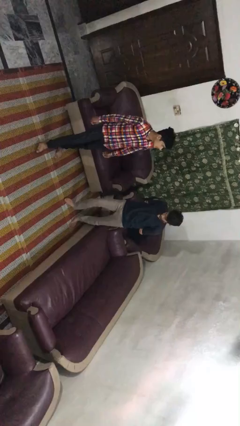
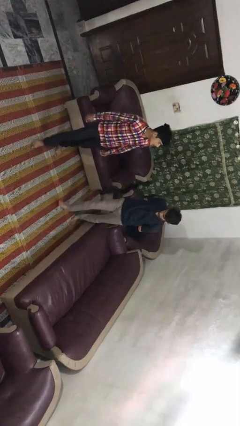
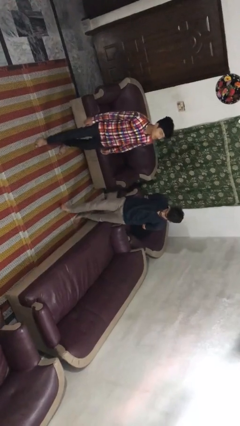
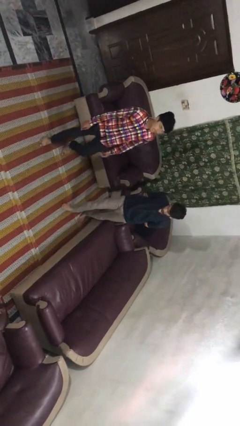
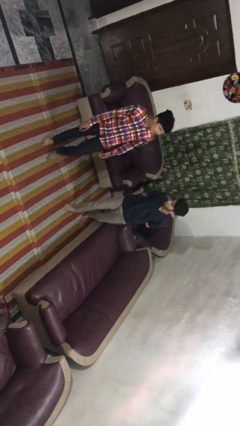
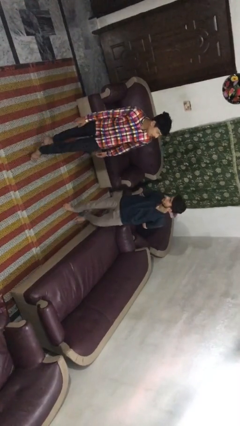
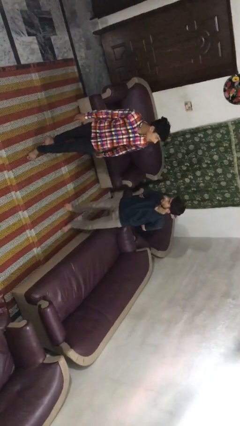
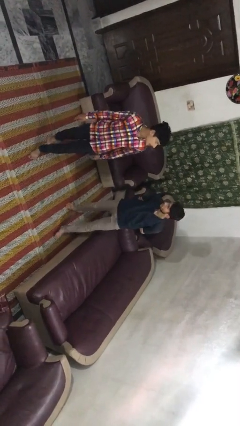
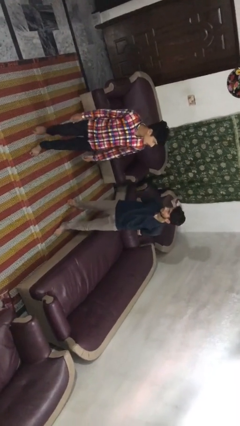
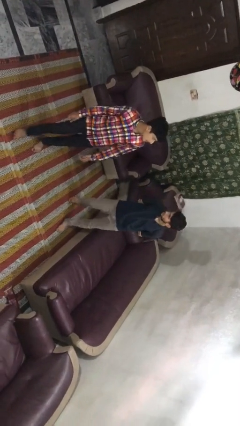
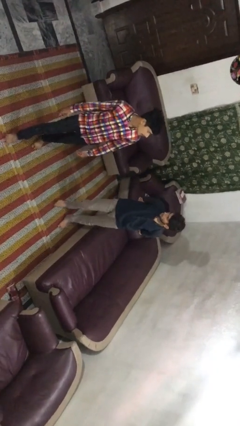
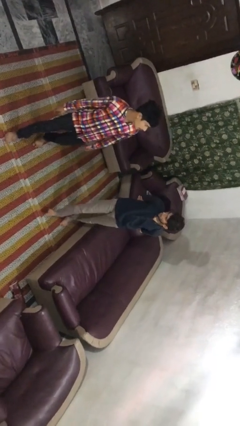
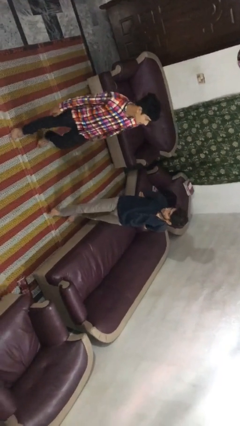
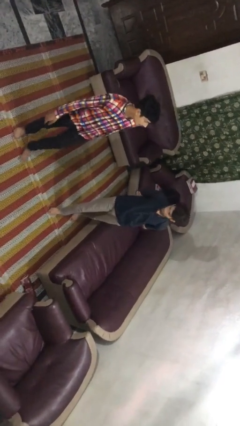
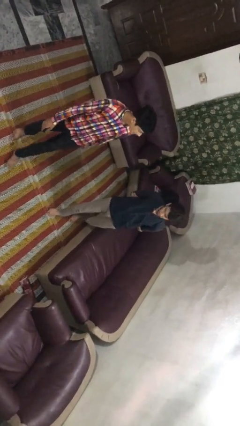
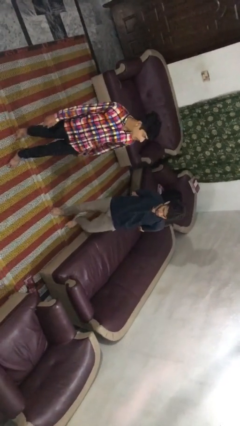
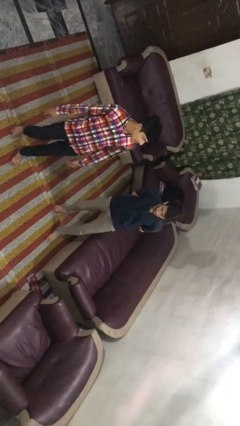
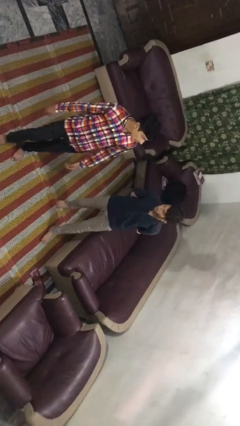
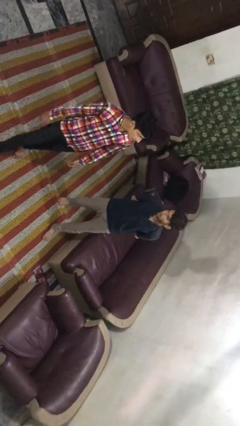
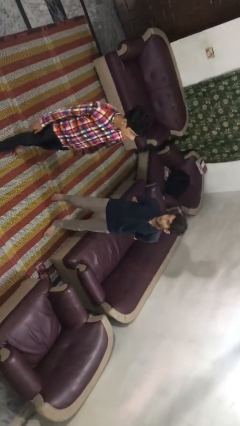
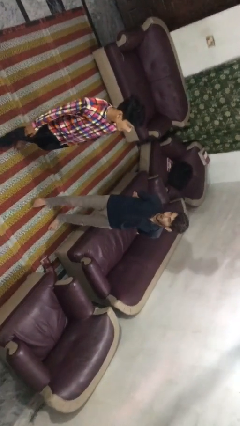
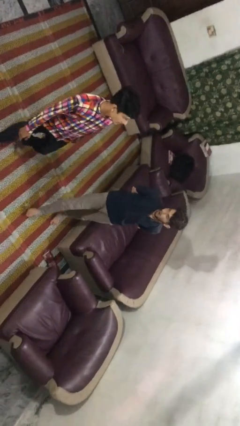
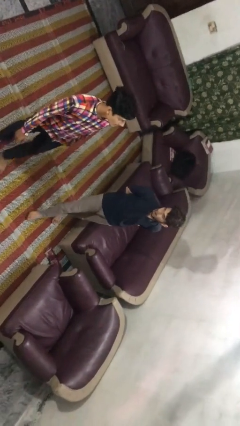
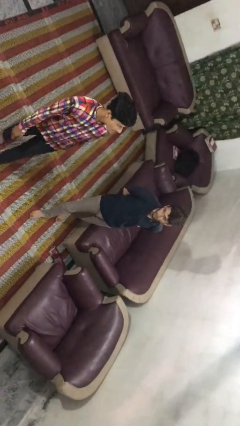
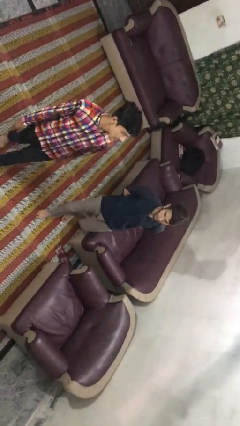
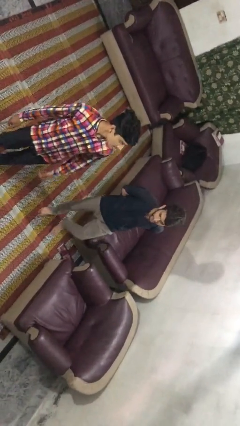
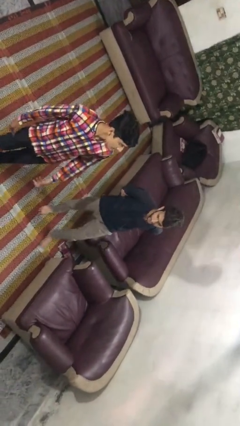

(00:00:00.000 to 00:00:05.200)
person talks to person

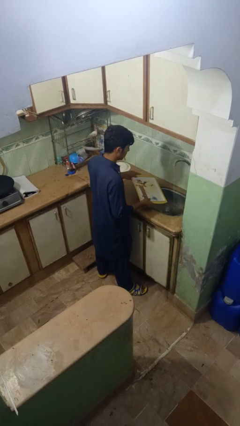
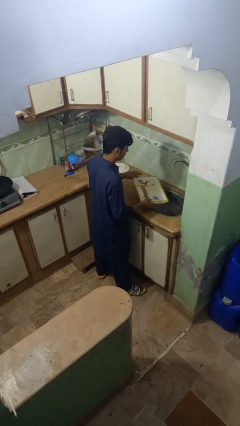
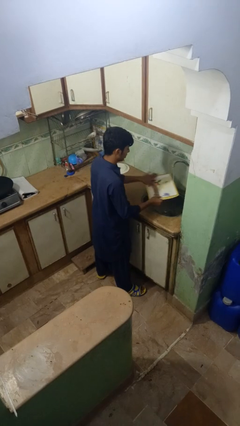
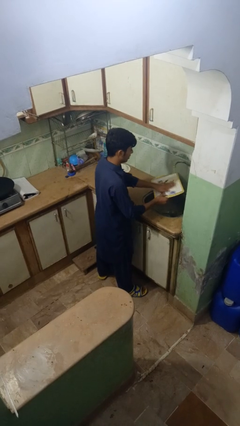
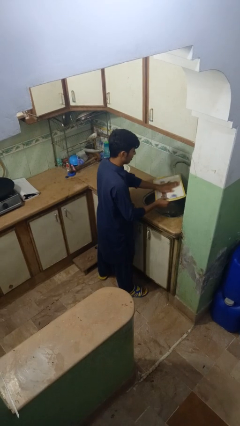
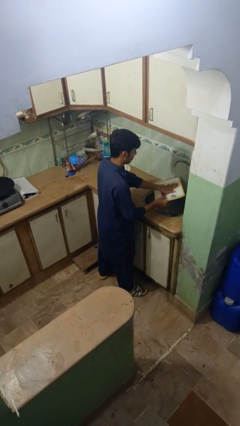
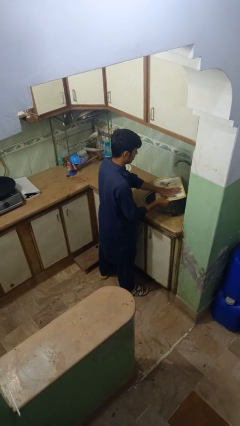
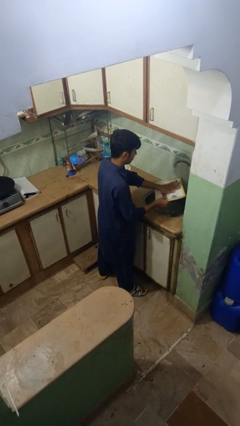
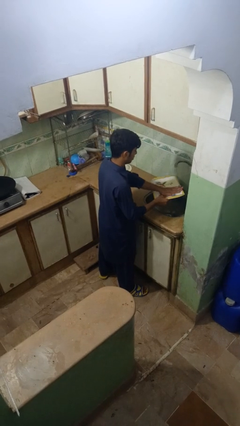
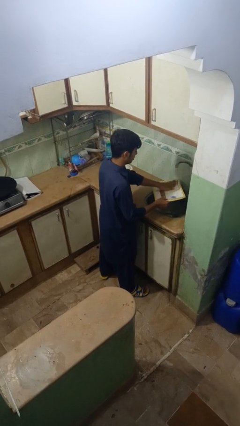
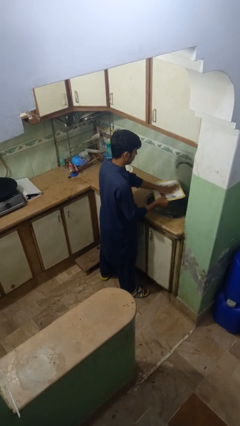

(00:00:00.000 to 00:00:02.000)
person washes dish

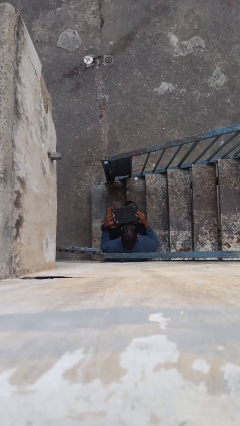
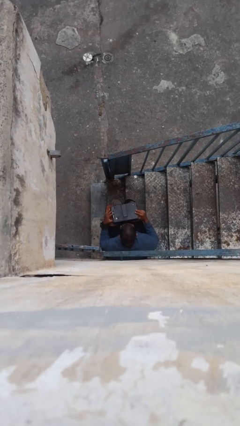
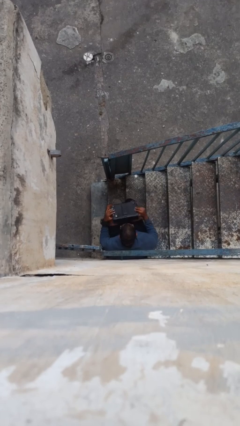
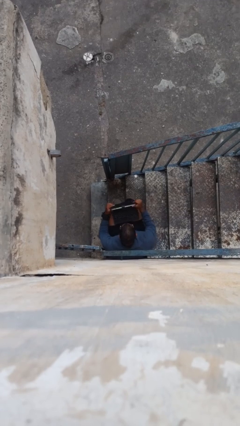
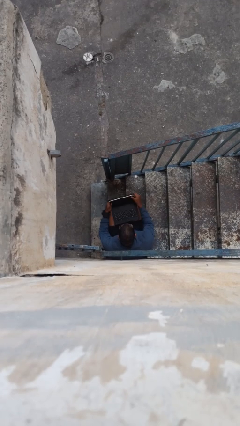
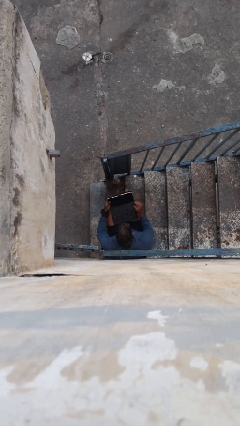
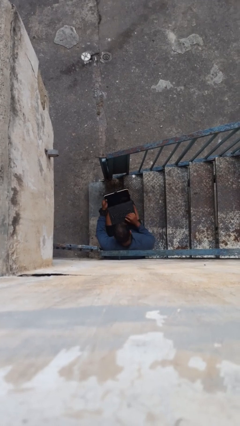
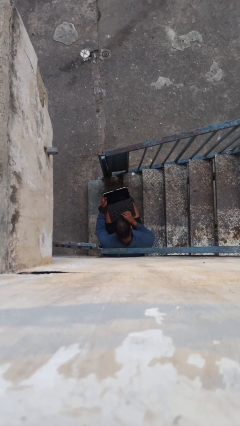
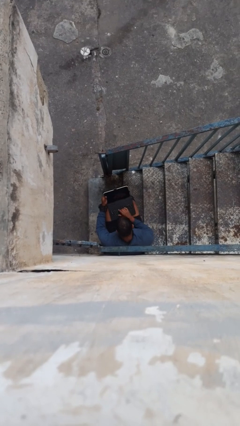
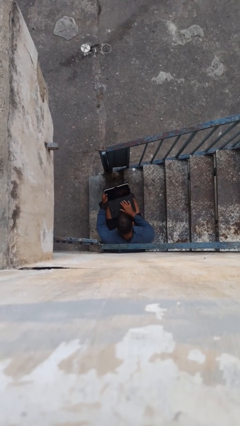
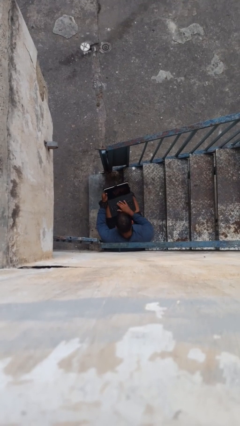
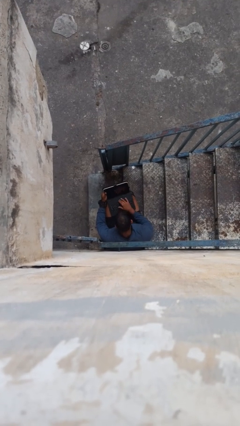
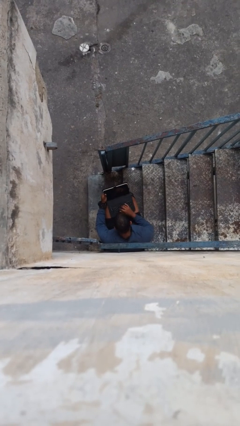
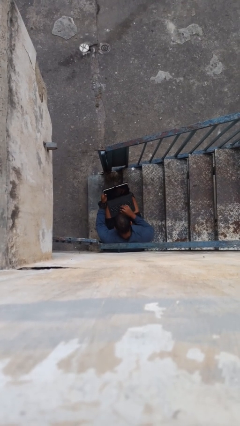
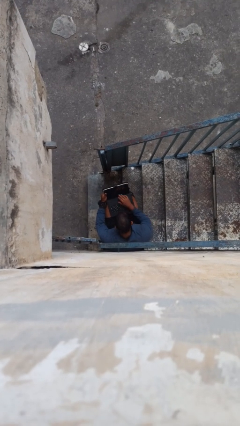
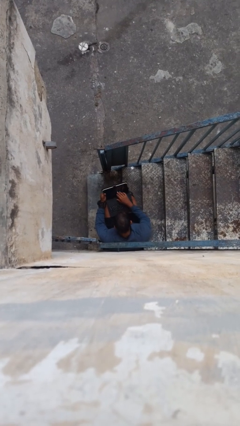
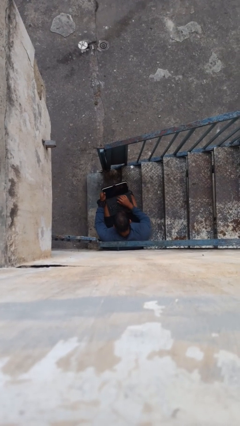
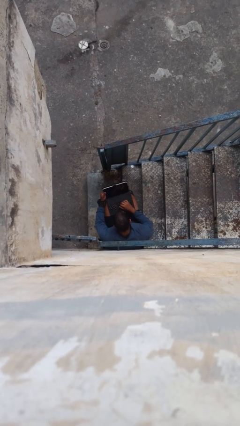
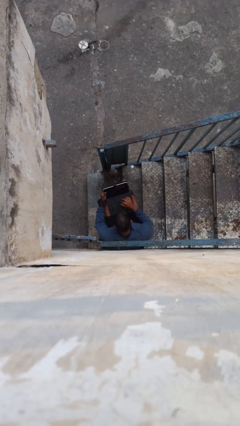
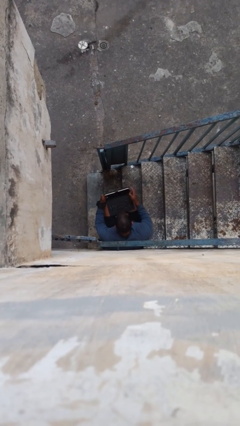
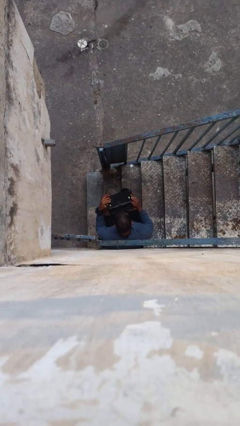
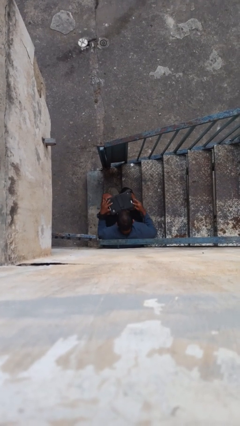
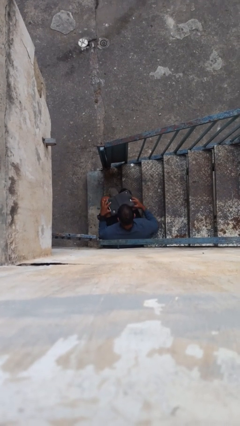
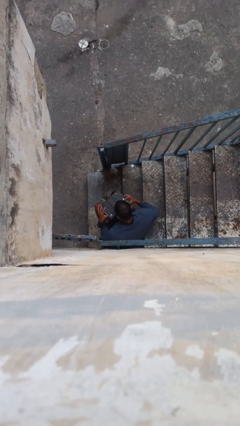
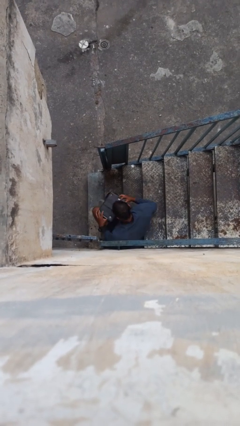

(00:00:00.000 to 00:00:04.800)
person interacts with laptop

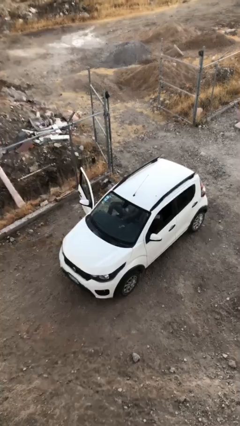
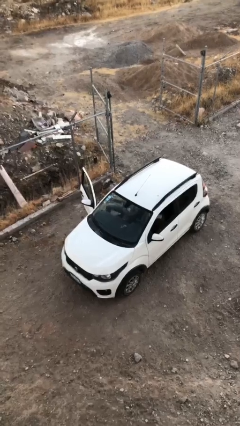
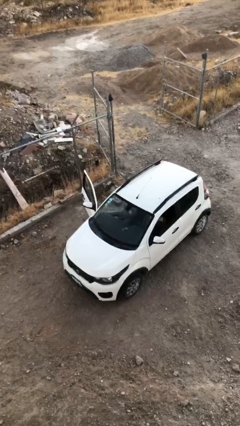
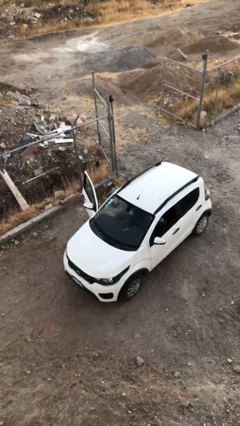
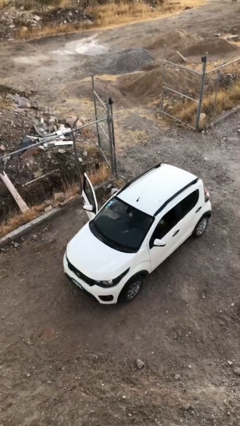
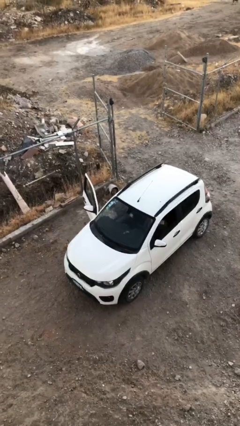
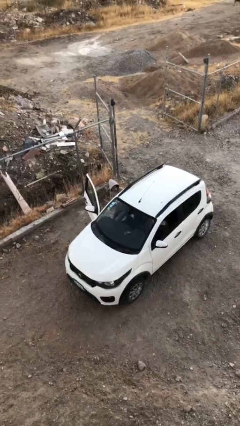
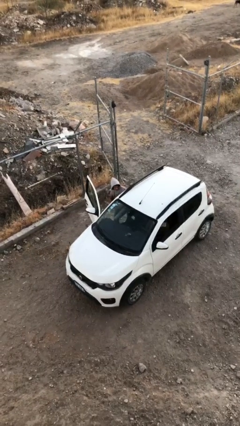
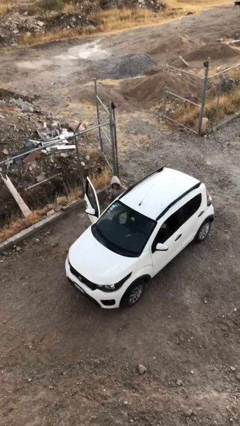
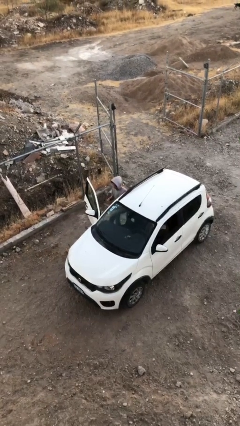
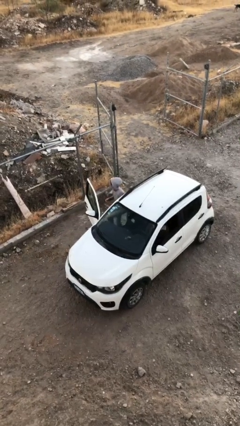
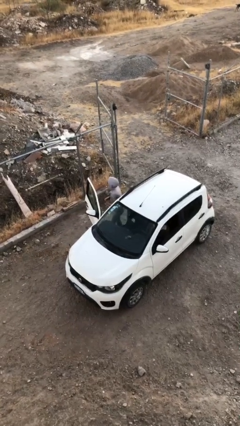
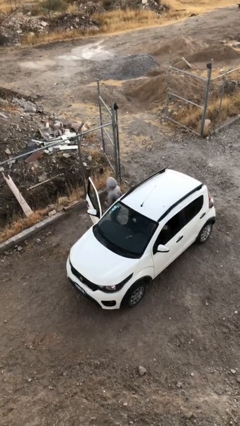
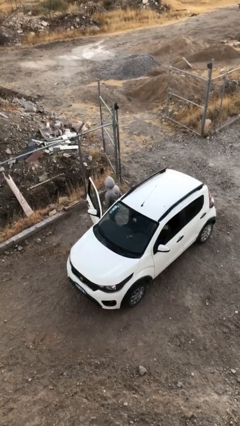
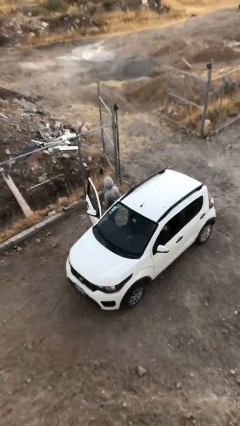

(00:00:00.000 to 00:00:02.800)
person exits car

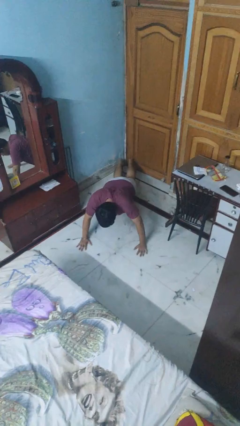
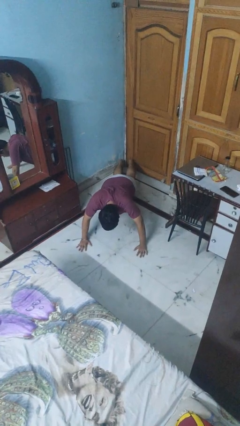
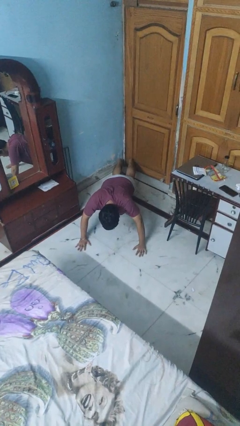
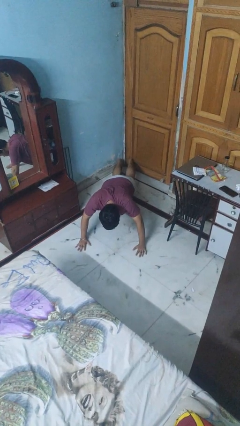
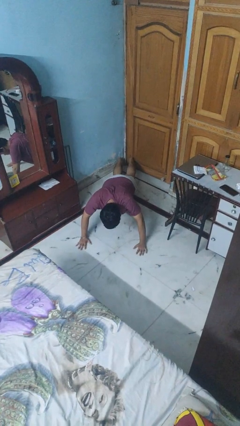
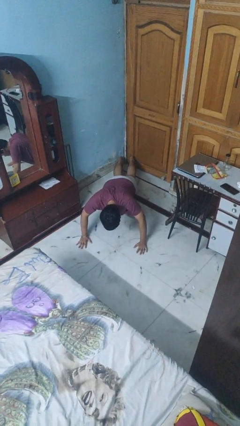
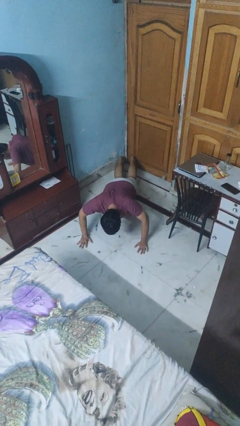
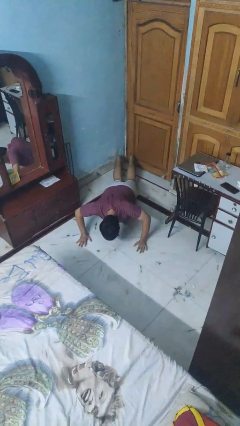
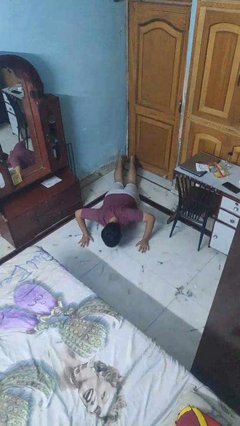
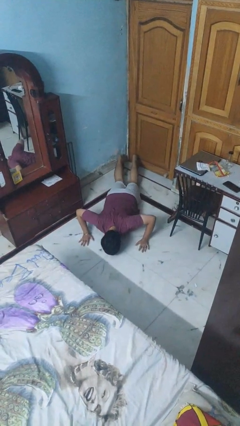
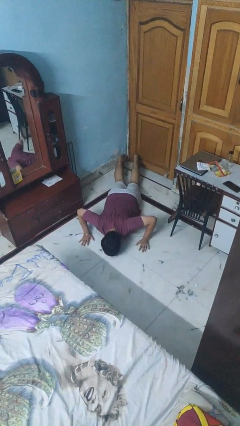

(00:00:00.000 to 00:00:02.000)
person exercises with pushup

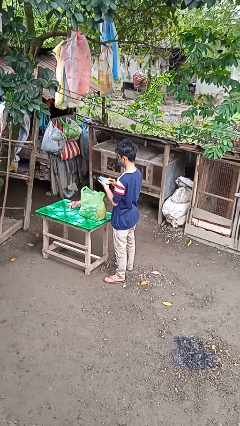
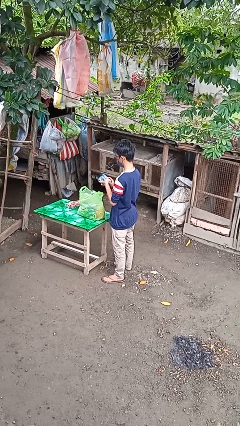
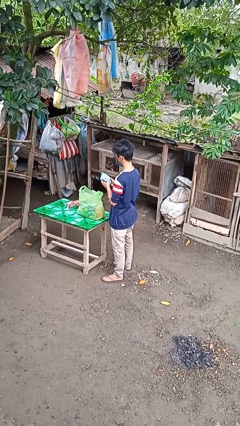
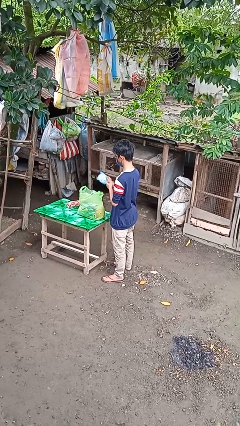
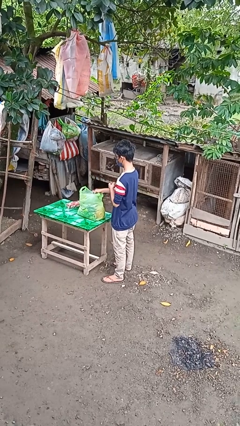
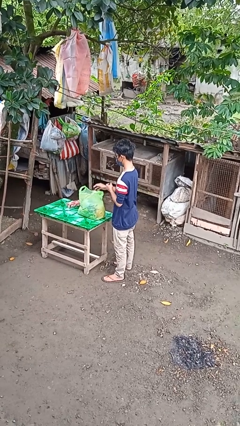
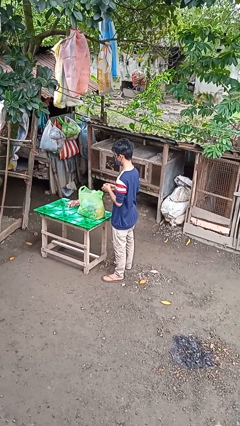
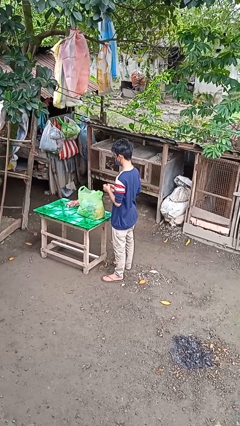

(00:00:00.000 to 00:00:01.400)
person puts object into bag
